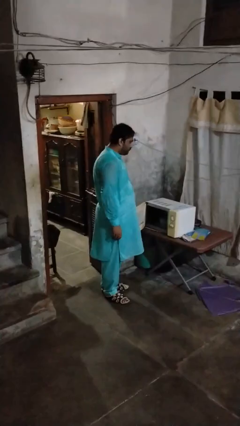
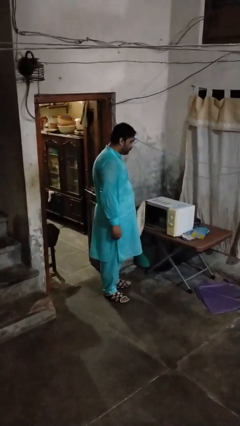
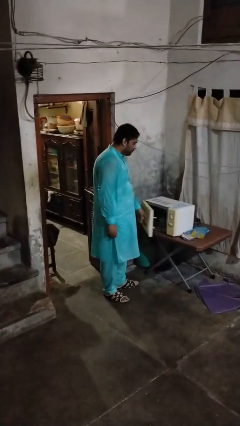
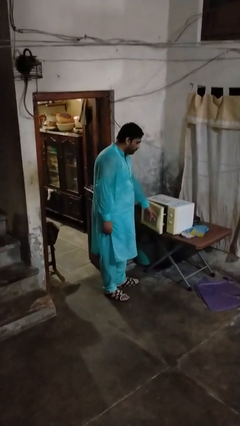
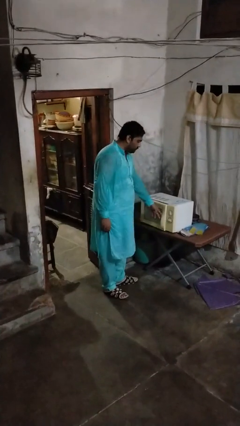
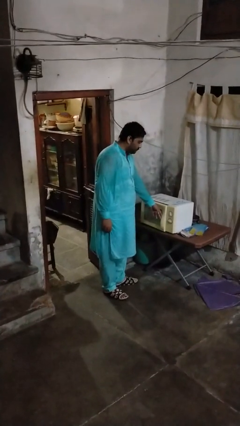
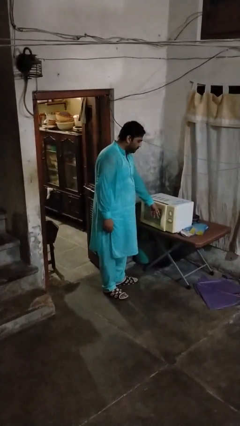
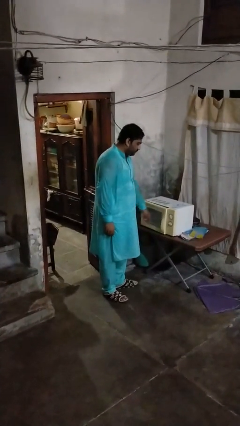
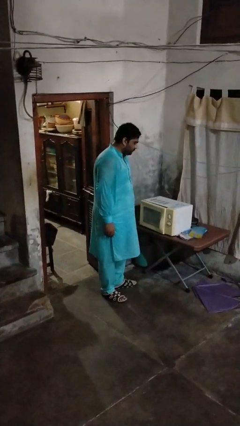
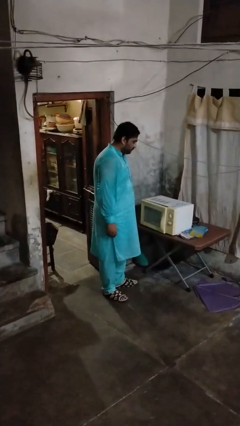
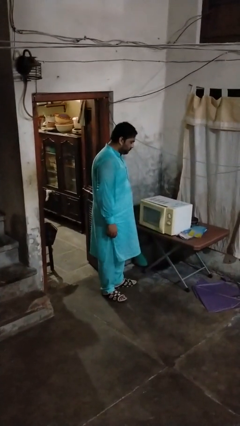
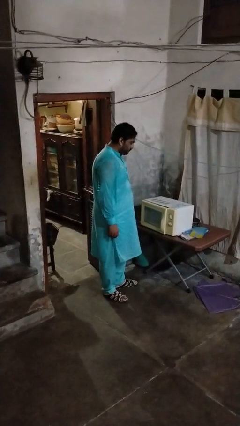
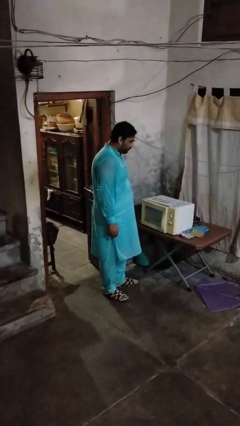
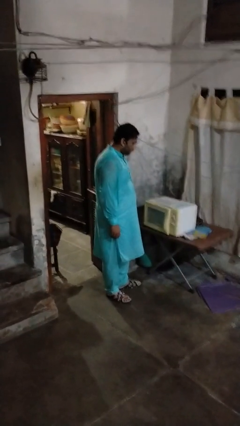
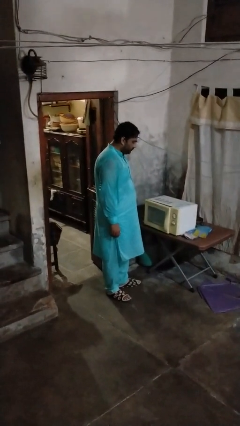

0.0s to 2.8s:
person closes microwave

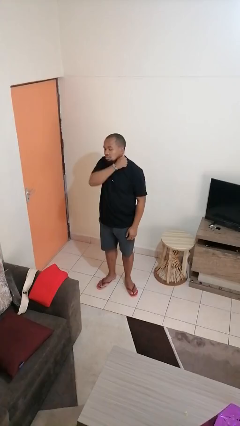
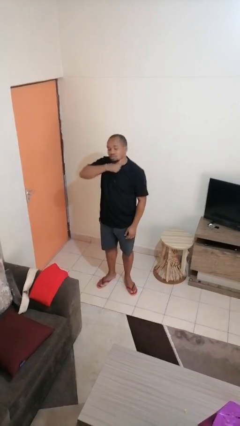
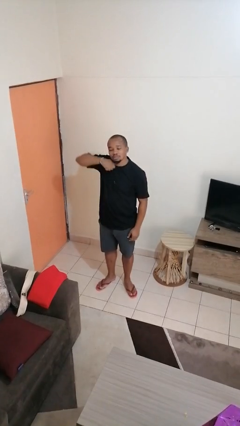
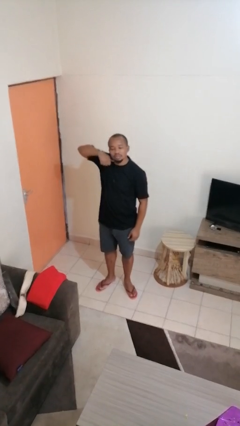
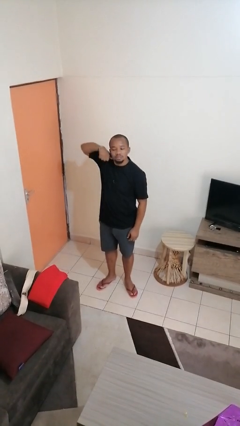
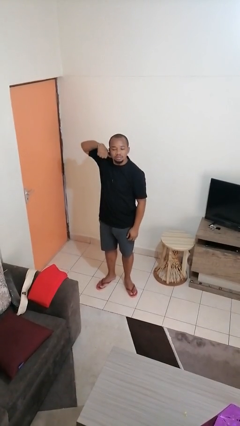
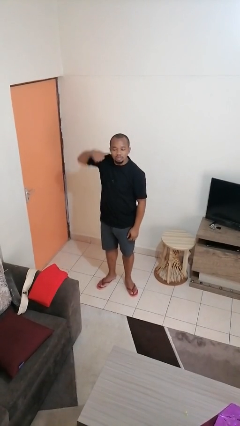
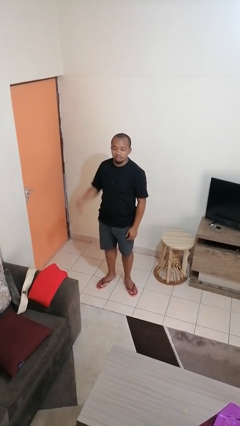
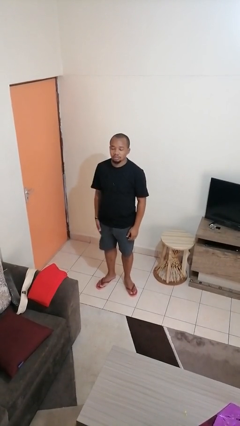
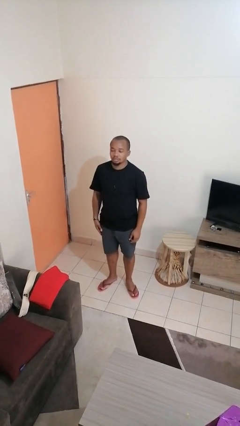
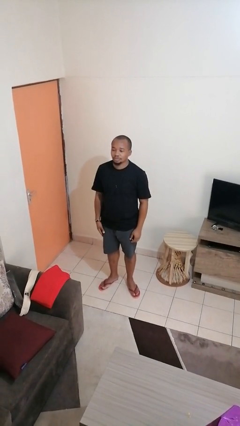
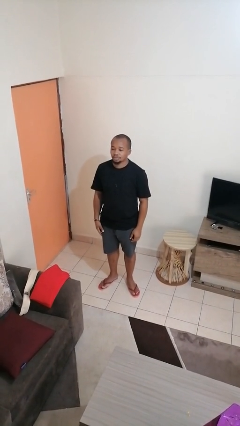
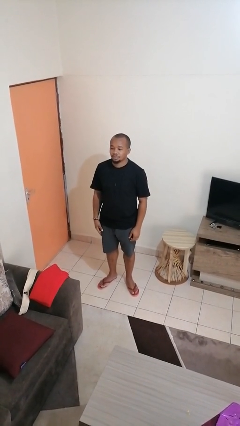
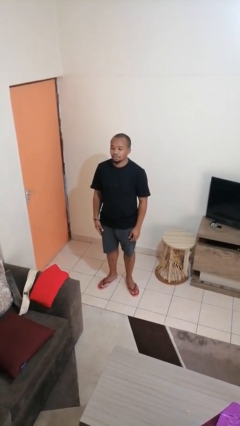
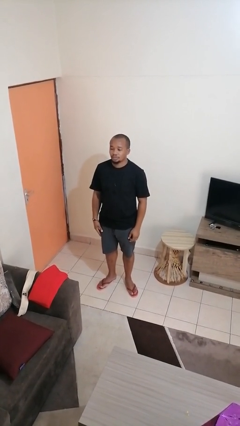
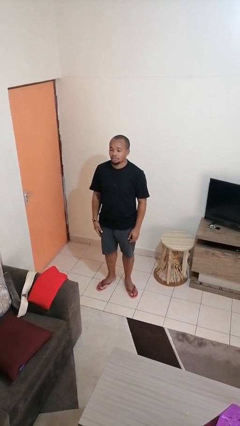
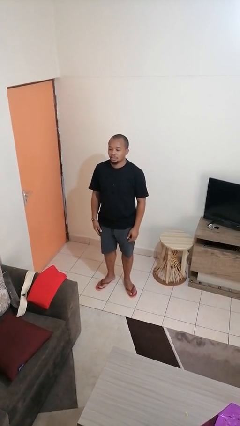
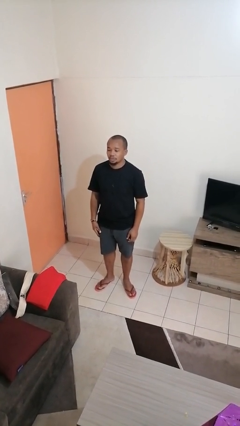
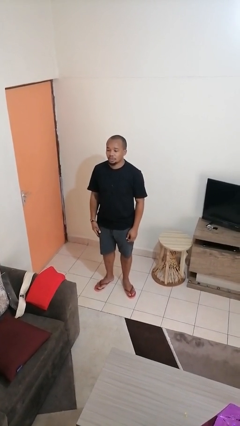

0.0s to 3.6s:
person gestures cut

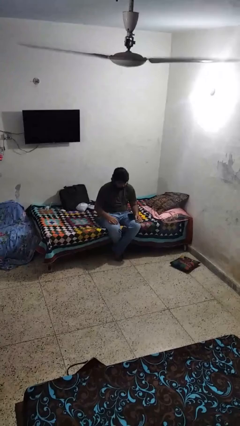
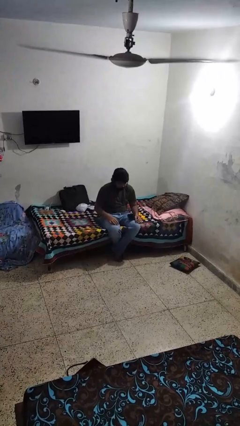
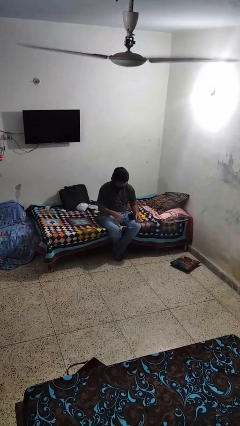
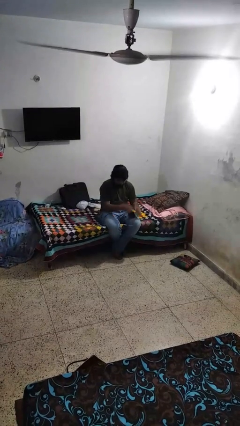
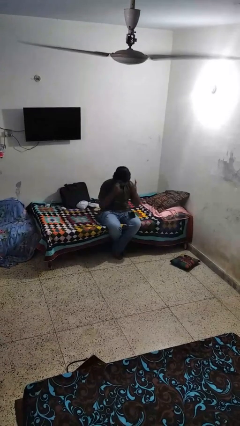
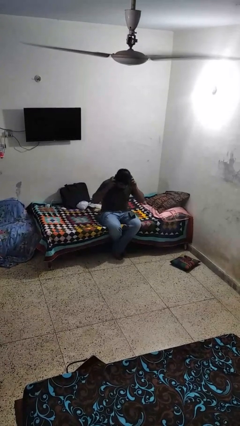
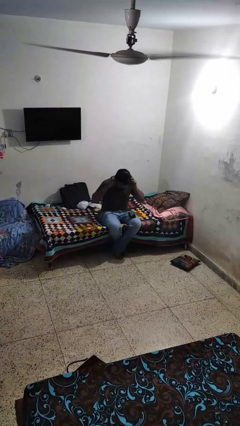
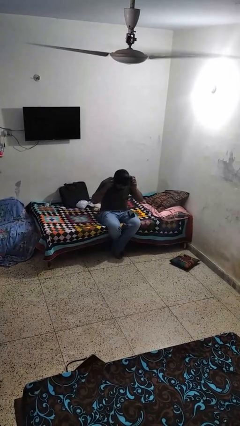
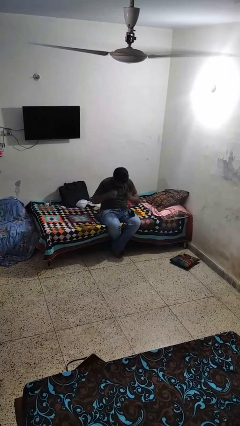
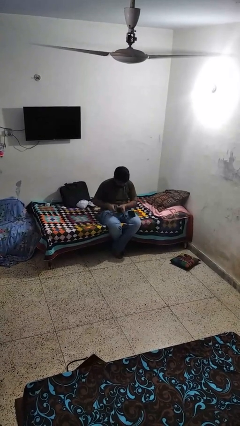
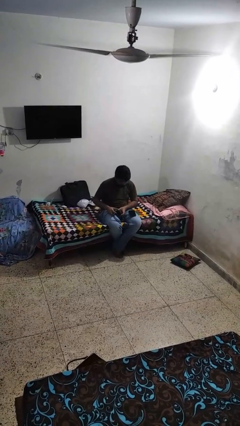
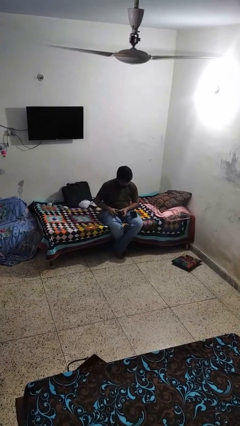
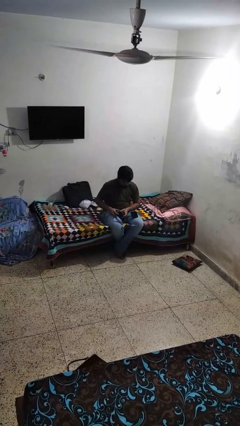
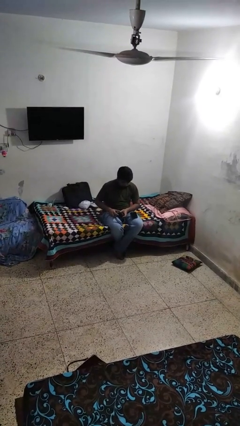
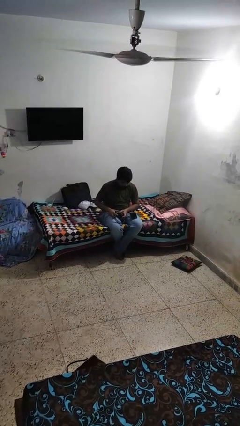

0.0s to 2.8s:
person takes off headphones

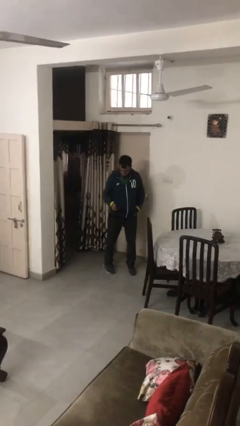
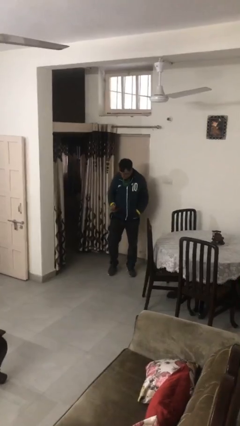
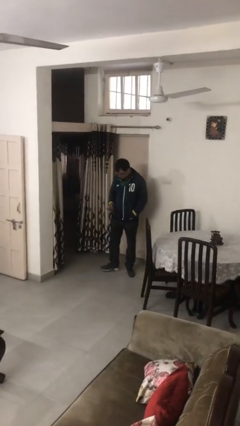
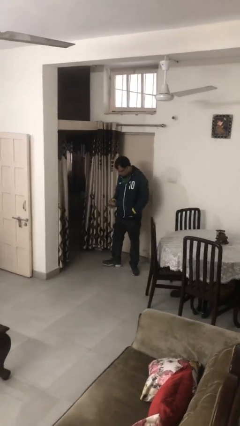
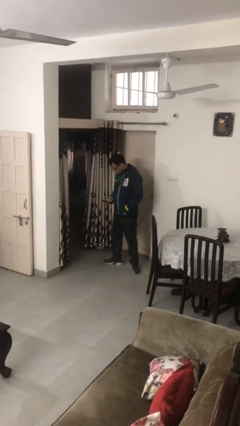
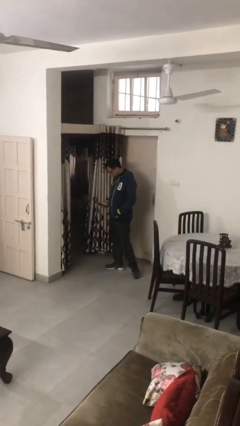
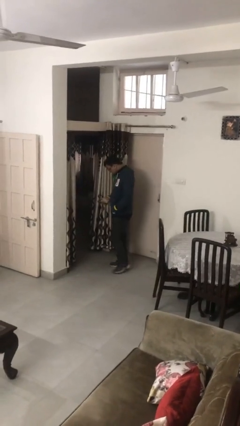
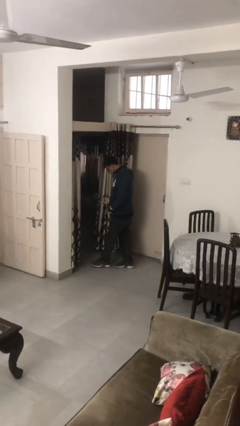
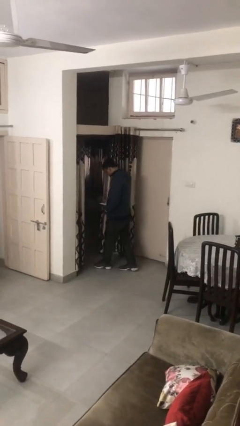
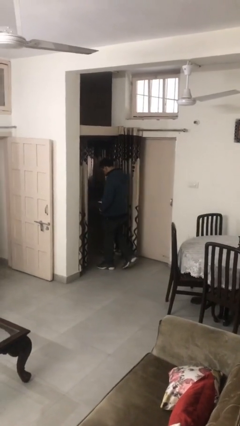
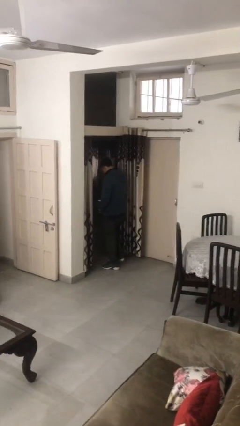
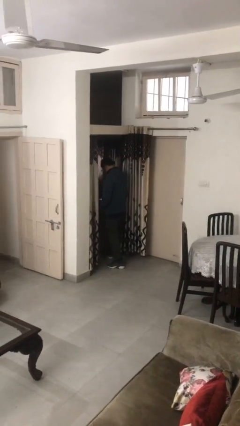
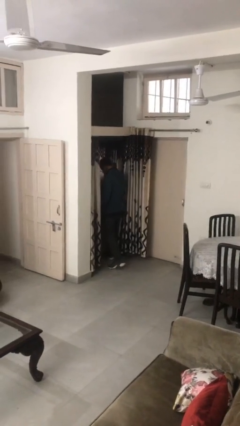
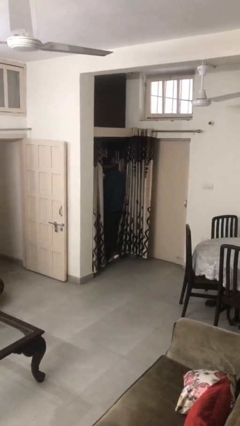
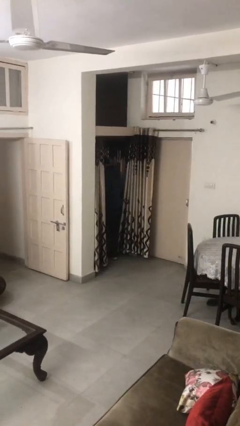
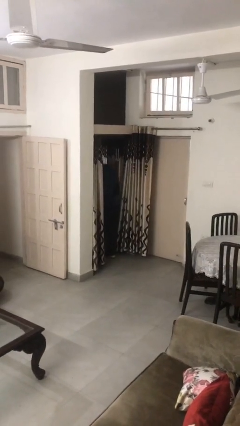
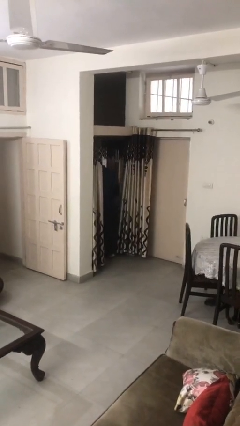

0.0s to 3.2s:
person exits scene through structure

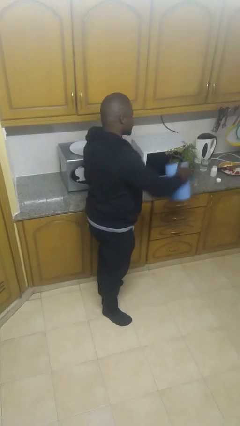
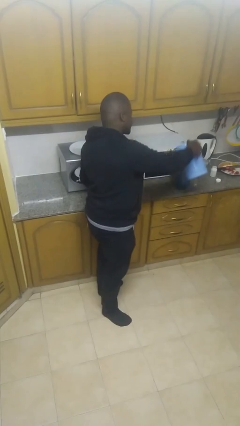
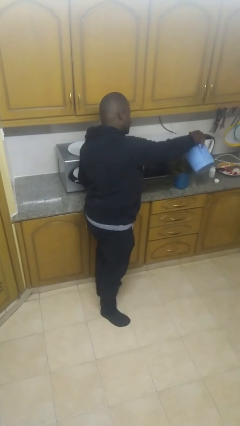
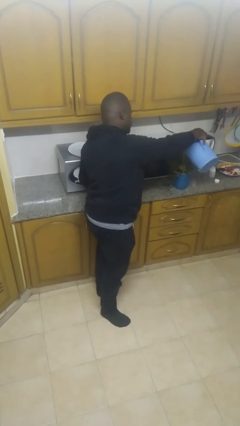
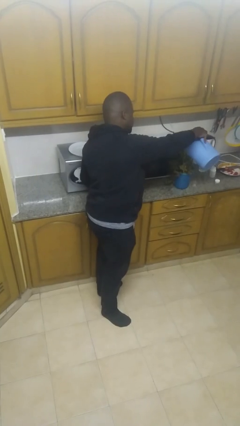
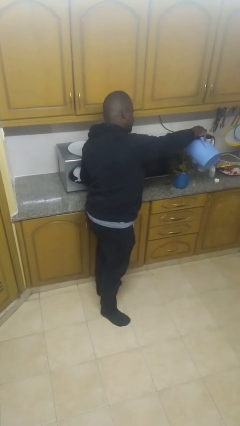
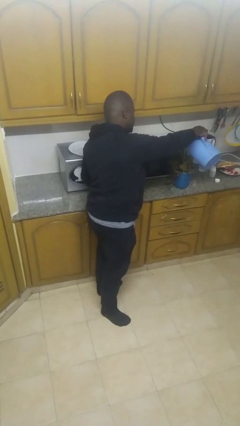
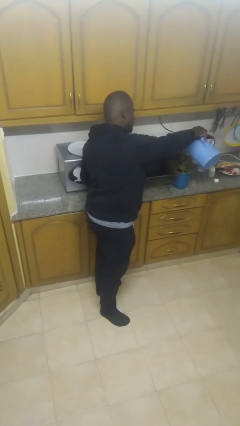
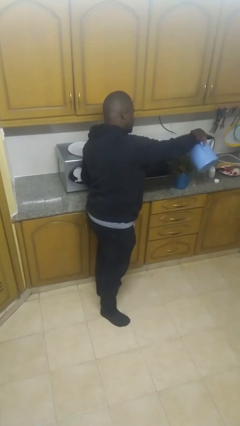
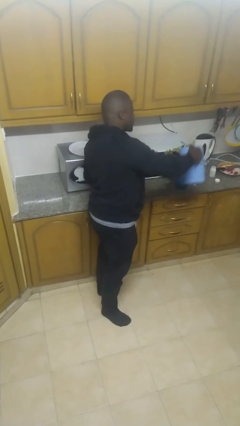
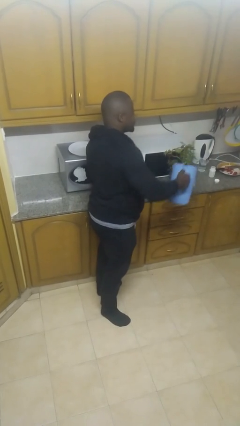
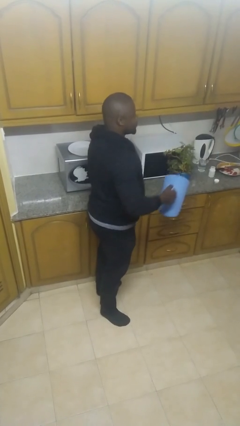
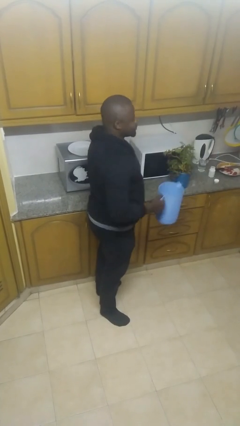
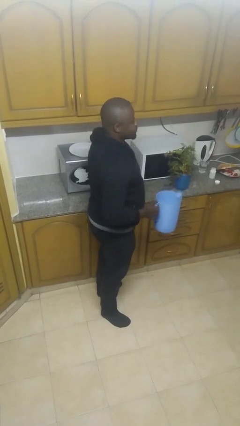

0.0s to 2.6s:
person waters houseplant

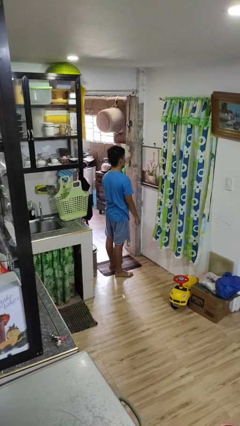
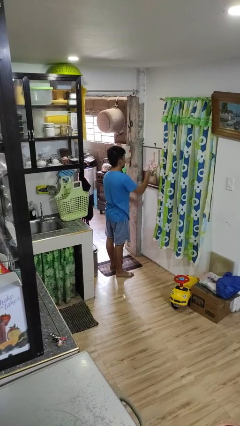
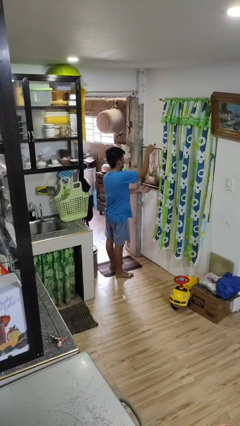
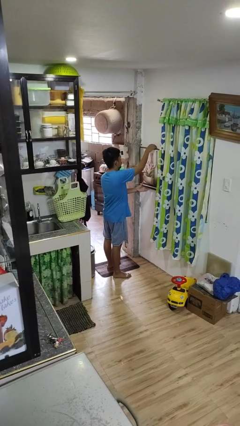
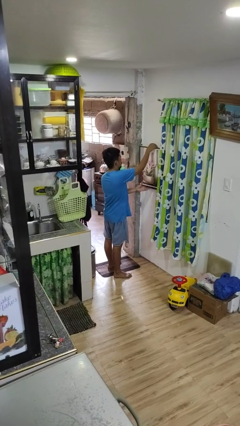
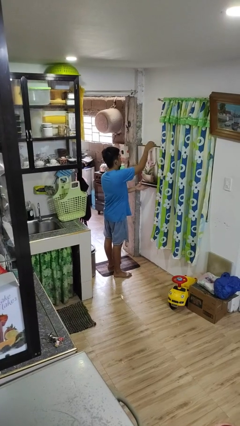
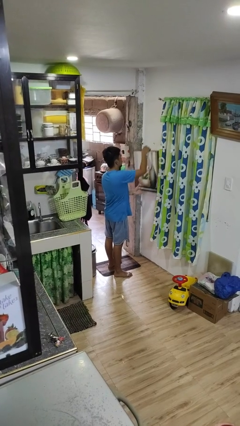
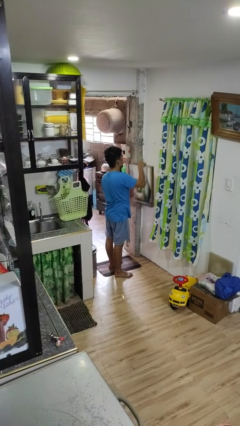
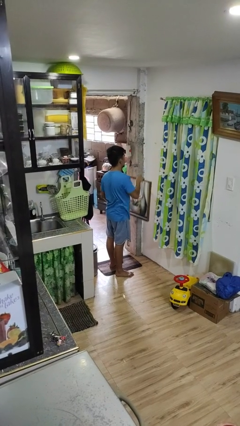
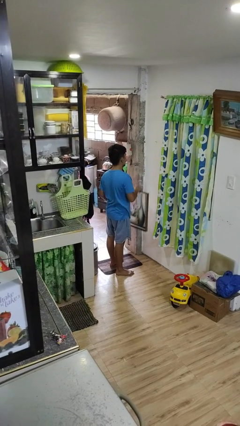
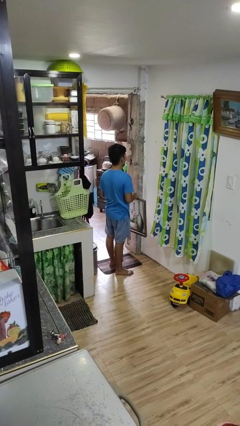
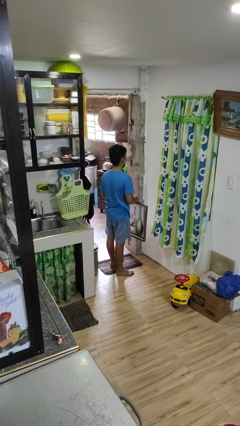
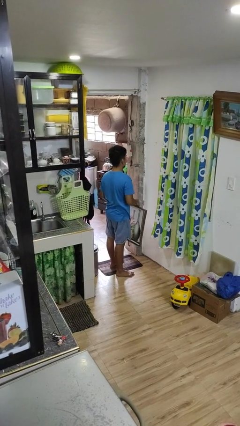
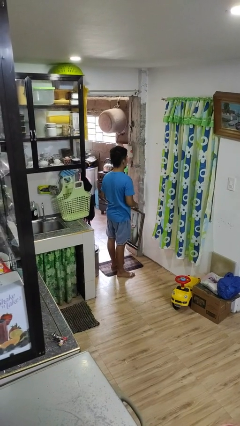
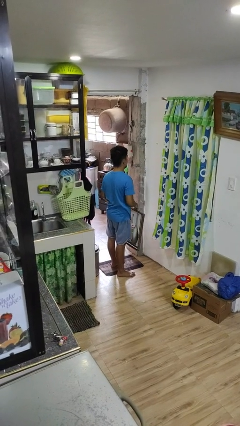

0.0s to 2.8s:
person takes down picture frame
